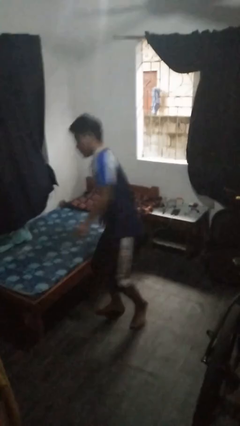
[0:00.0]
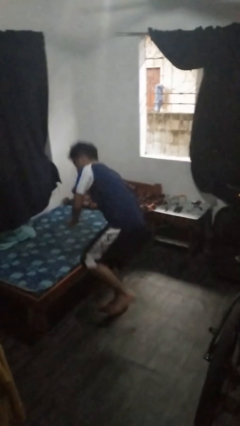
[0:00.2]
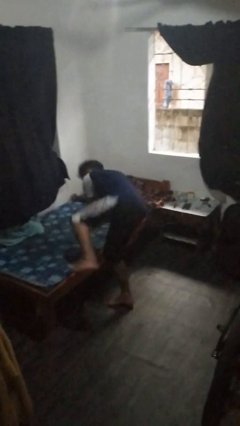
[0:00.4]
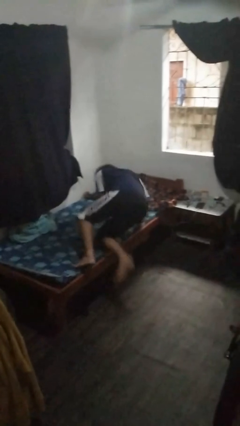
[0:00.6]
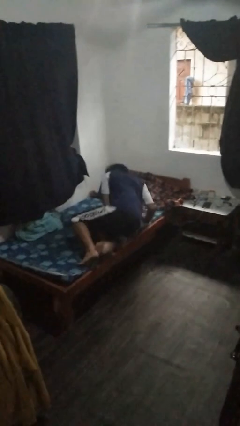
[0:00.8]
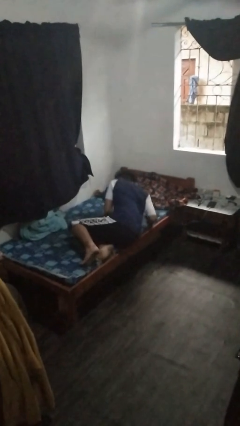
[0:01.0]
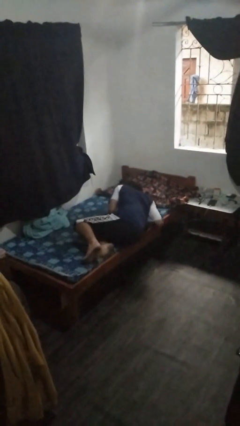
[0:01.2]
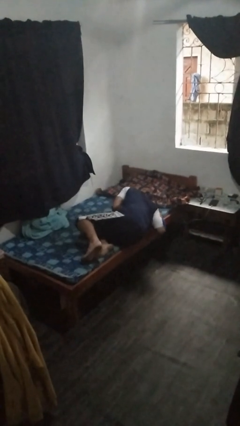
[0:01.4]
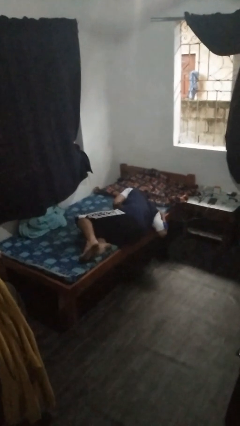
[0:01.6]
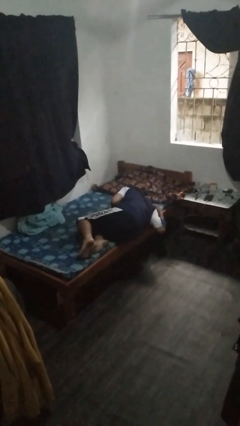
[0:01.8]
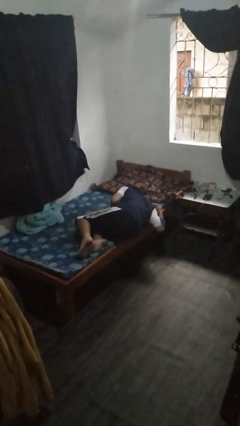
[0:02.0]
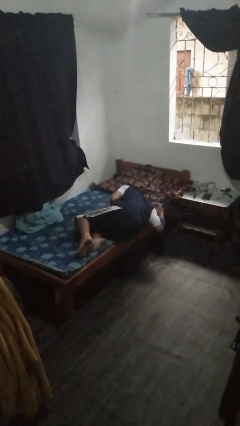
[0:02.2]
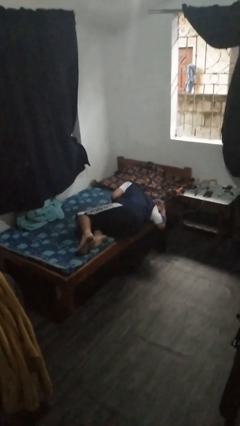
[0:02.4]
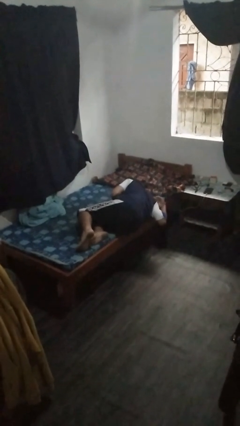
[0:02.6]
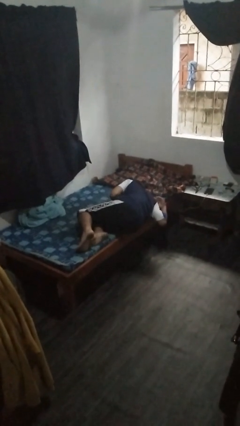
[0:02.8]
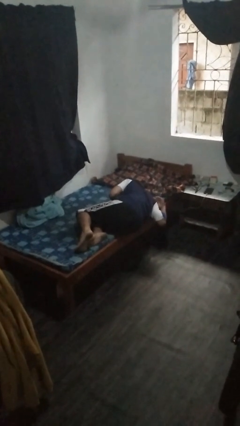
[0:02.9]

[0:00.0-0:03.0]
person lies down on bed

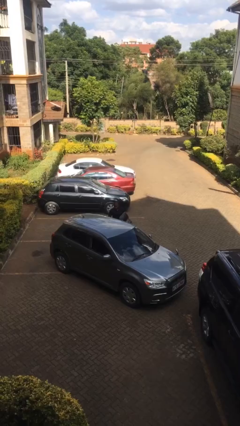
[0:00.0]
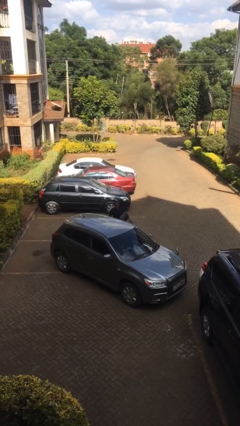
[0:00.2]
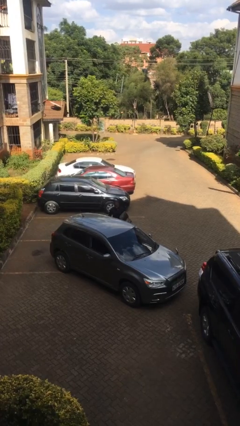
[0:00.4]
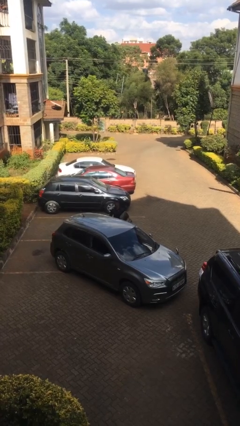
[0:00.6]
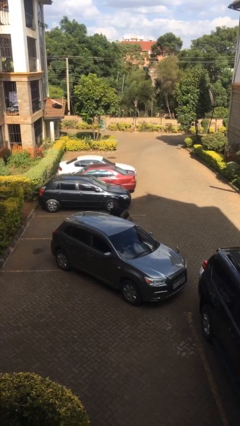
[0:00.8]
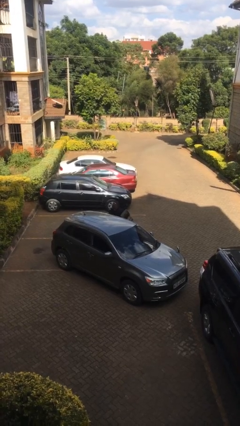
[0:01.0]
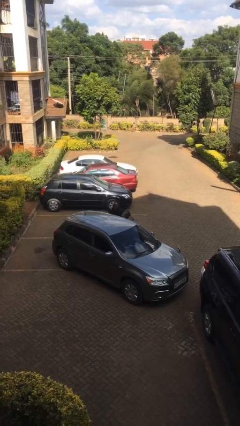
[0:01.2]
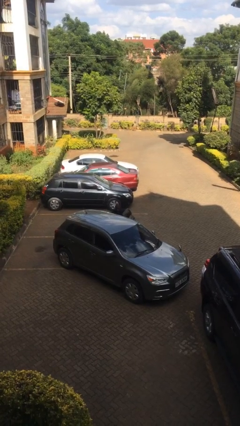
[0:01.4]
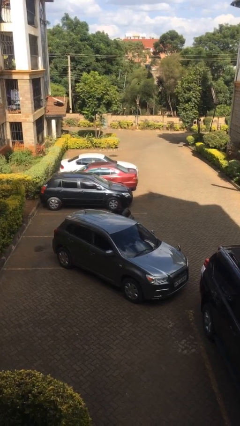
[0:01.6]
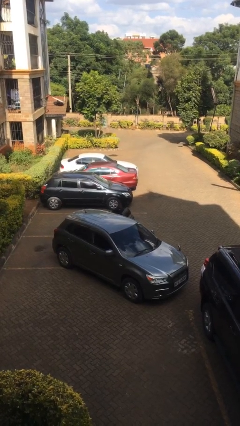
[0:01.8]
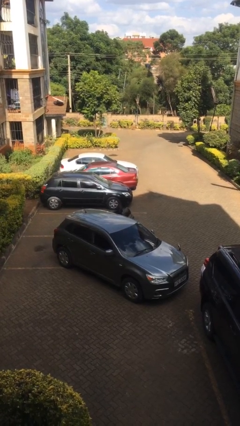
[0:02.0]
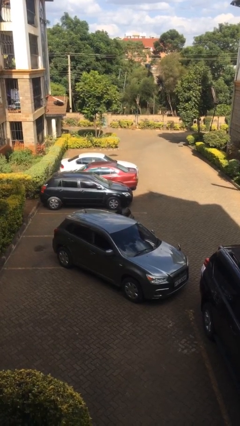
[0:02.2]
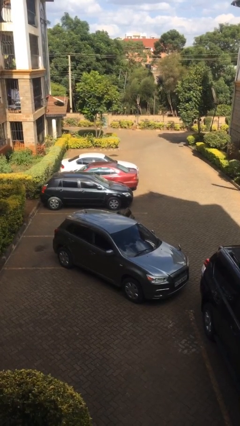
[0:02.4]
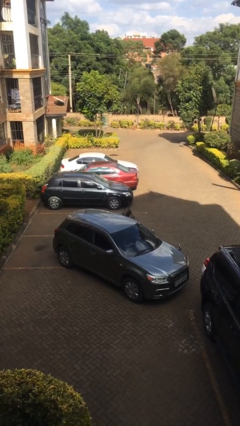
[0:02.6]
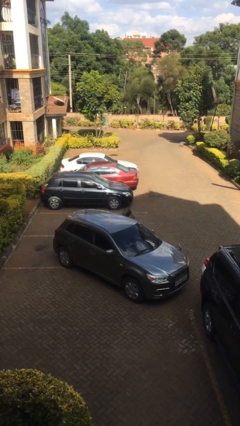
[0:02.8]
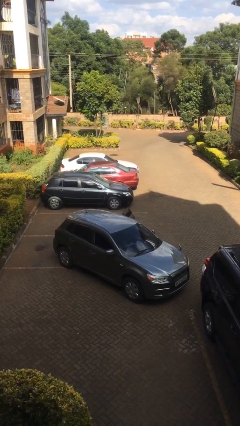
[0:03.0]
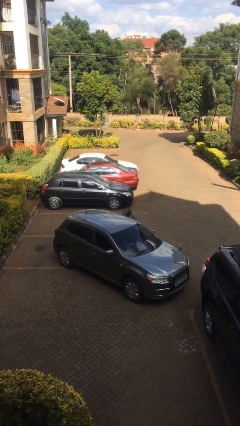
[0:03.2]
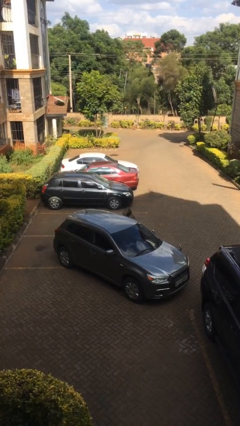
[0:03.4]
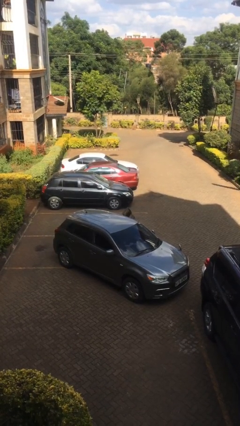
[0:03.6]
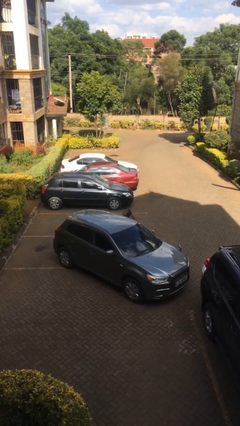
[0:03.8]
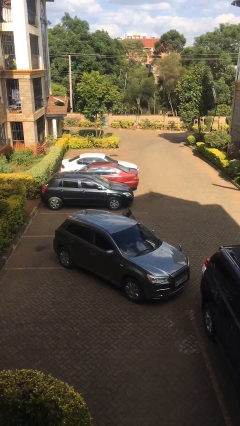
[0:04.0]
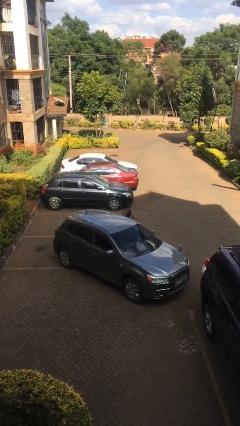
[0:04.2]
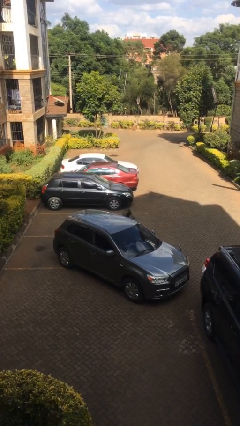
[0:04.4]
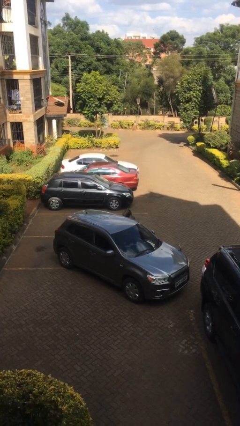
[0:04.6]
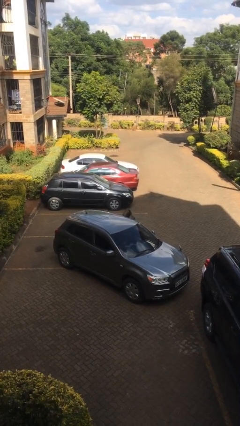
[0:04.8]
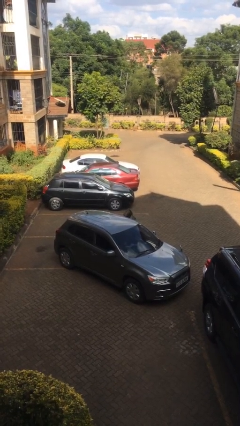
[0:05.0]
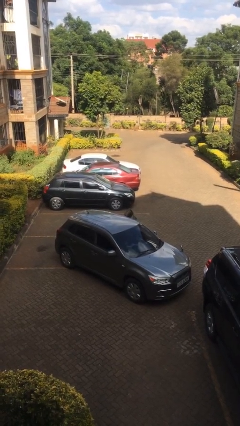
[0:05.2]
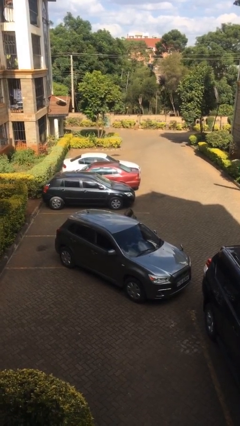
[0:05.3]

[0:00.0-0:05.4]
person enters car

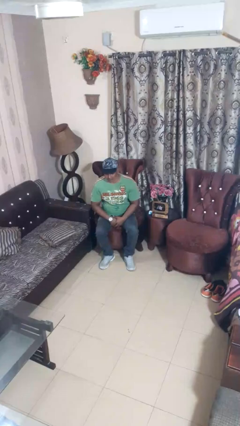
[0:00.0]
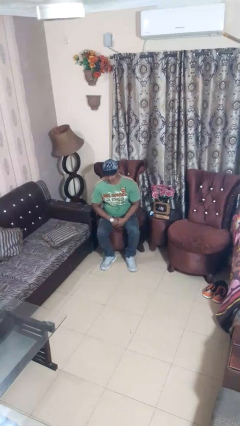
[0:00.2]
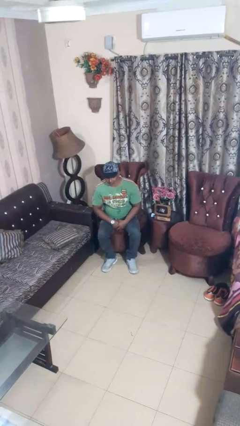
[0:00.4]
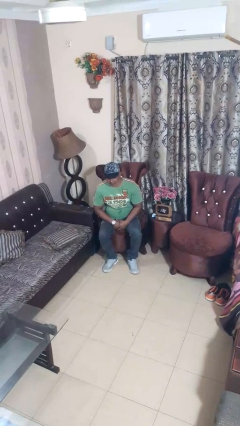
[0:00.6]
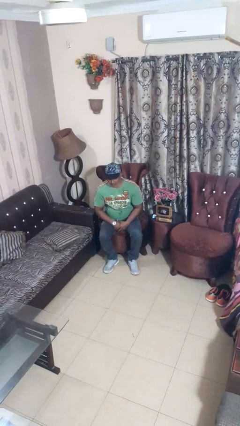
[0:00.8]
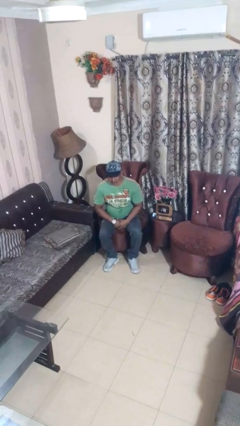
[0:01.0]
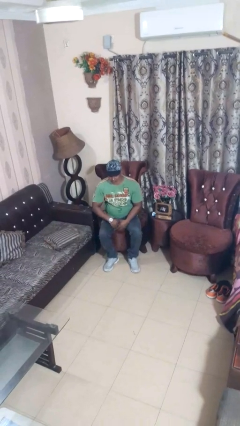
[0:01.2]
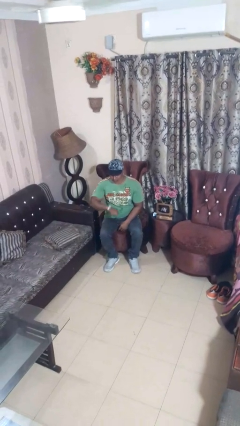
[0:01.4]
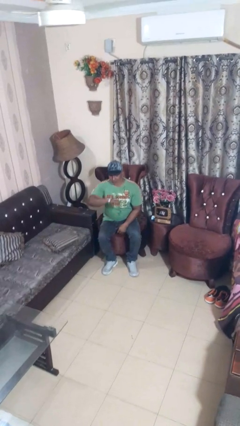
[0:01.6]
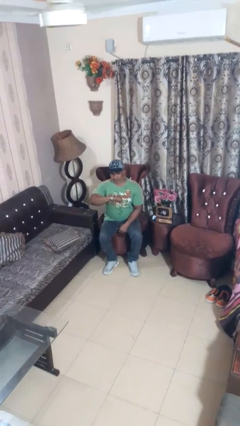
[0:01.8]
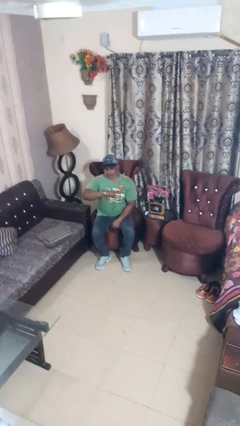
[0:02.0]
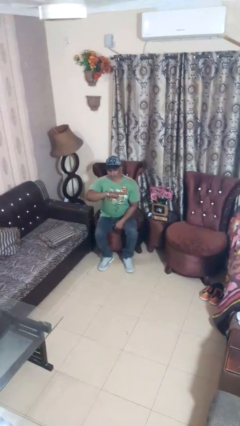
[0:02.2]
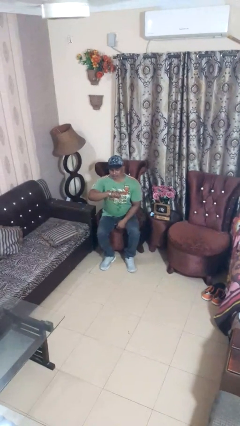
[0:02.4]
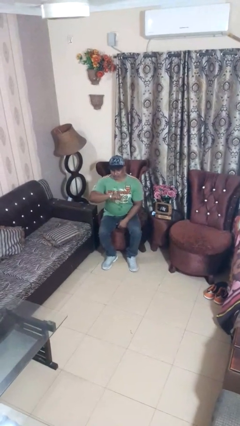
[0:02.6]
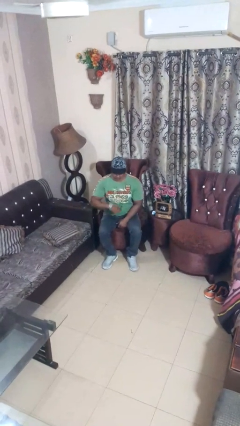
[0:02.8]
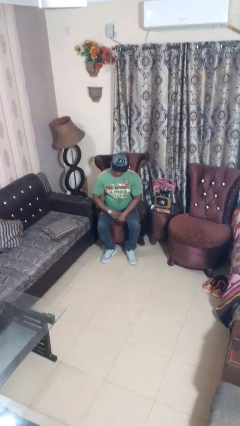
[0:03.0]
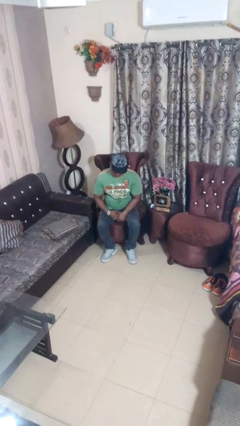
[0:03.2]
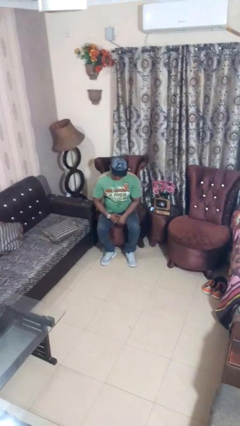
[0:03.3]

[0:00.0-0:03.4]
person looks at wristwatch

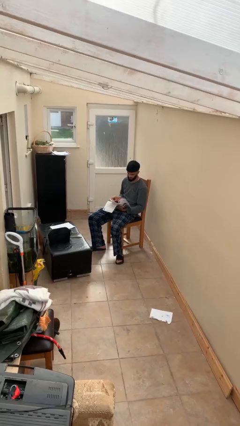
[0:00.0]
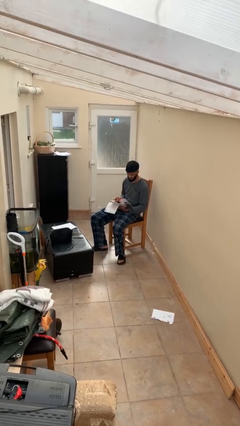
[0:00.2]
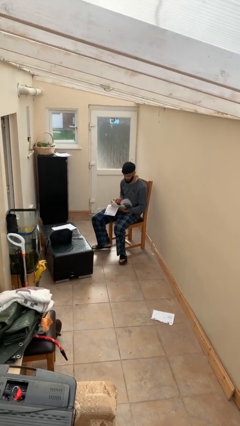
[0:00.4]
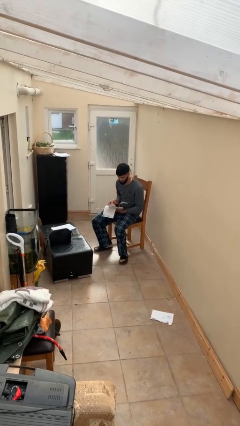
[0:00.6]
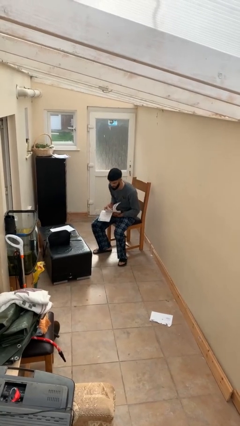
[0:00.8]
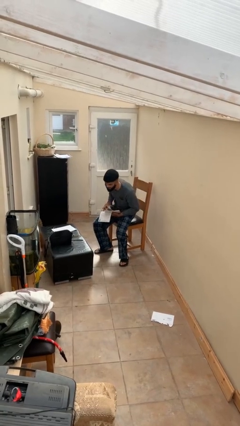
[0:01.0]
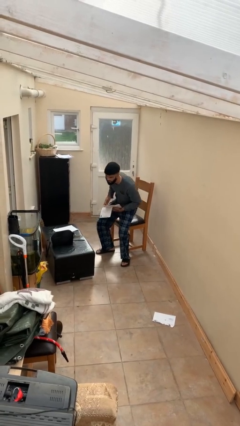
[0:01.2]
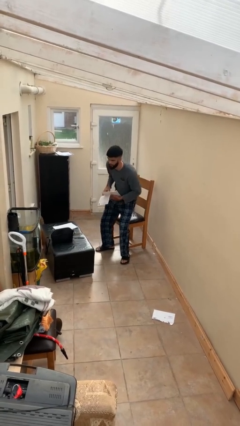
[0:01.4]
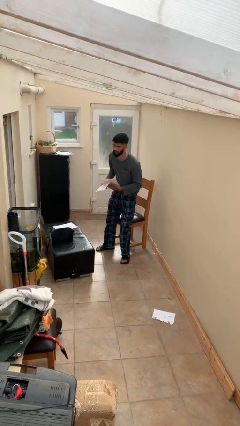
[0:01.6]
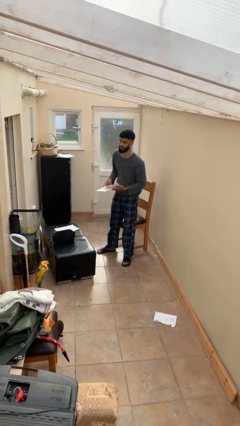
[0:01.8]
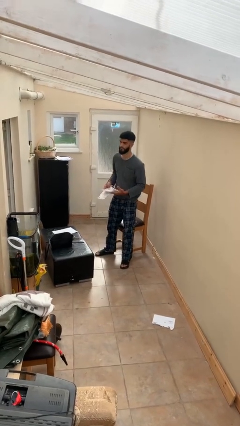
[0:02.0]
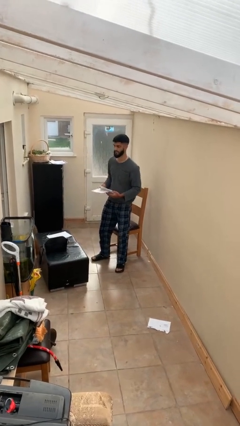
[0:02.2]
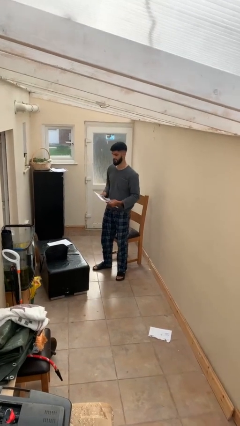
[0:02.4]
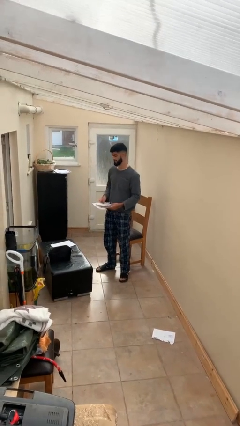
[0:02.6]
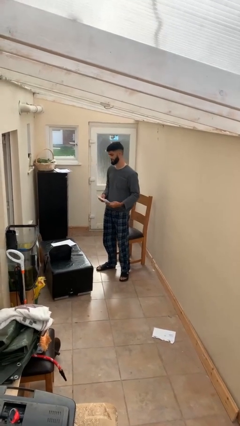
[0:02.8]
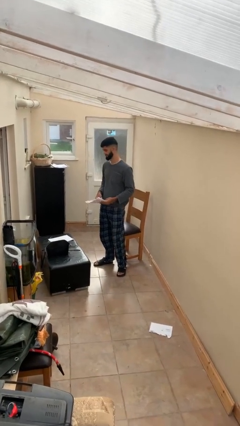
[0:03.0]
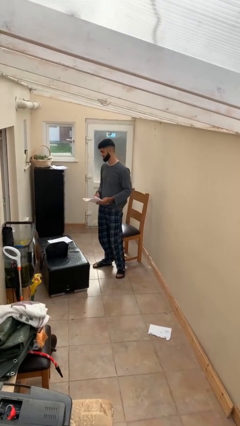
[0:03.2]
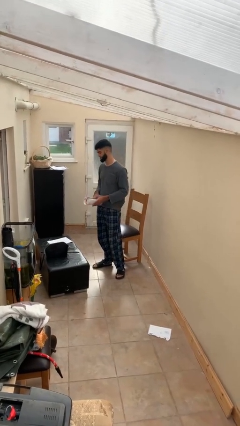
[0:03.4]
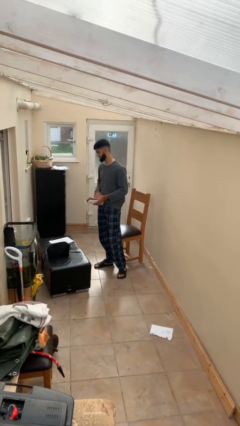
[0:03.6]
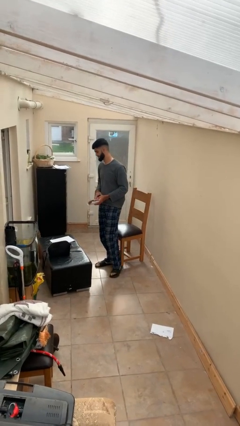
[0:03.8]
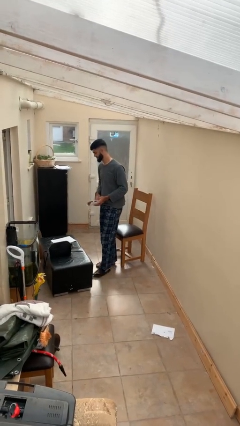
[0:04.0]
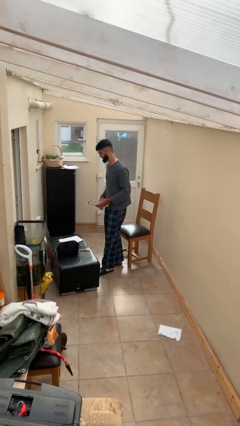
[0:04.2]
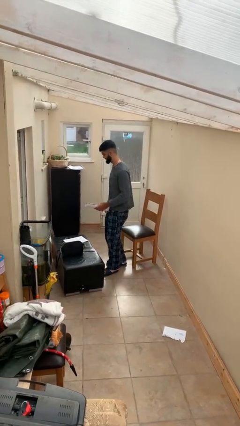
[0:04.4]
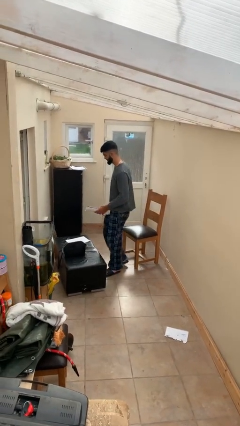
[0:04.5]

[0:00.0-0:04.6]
person stands up

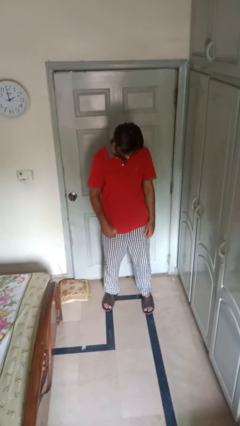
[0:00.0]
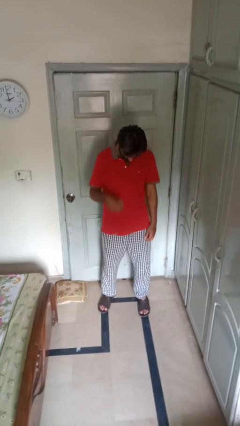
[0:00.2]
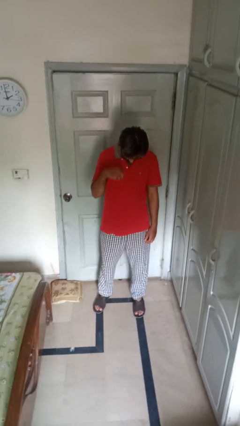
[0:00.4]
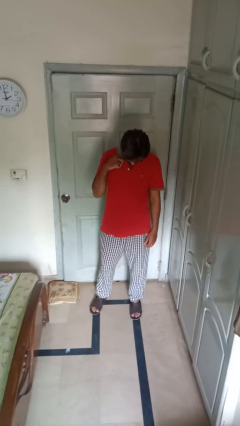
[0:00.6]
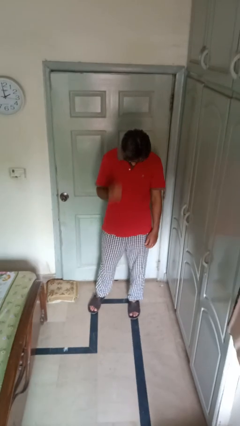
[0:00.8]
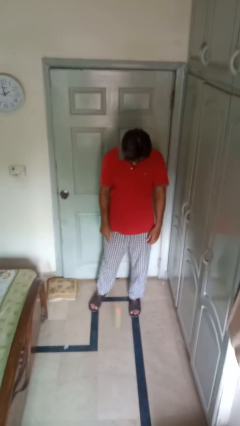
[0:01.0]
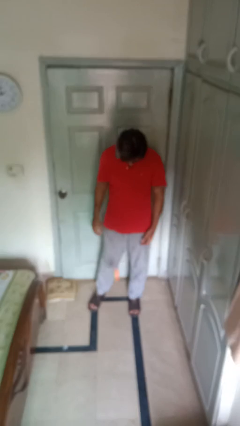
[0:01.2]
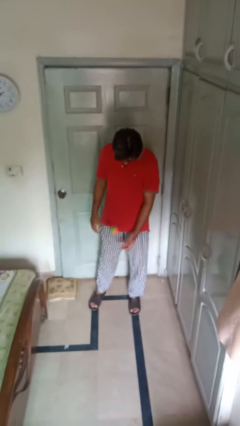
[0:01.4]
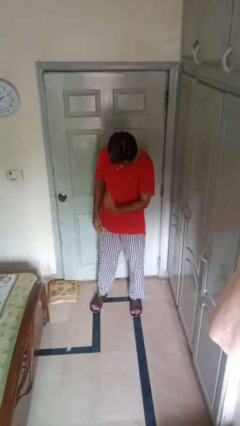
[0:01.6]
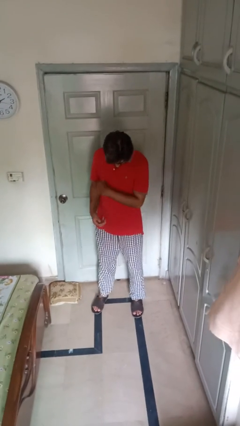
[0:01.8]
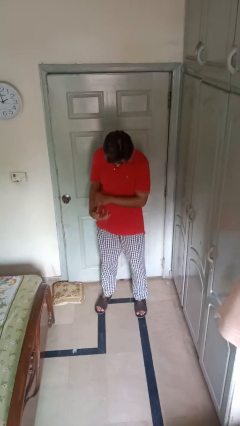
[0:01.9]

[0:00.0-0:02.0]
person bounces ball on floor
